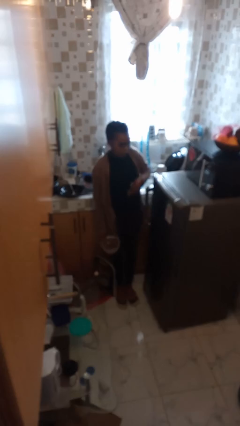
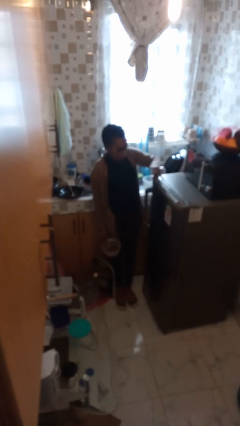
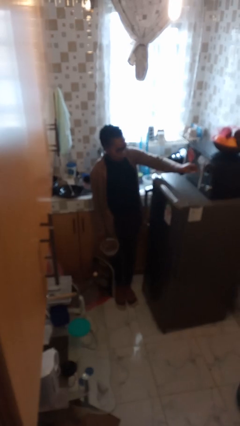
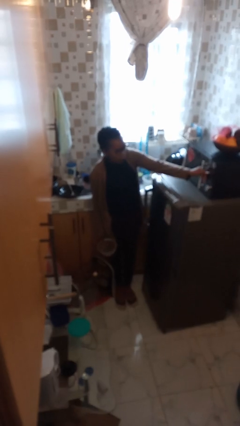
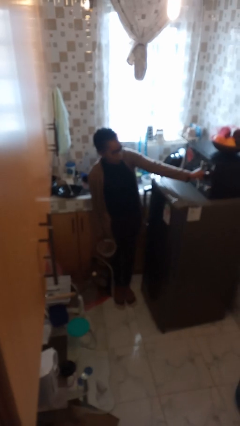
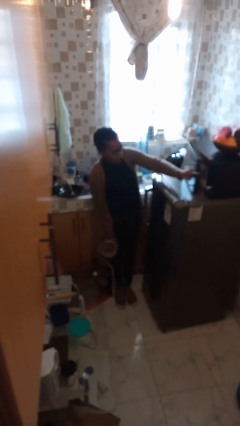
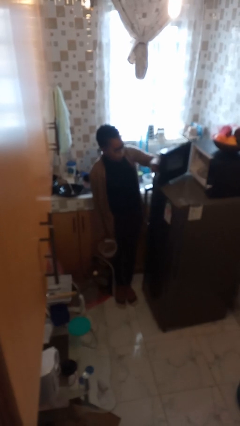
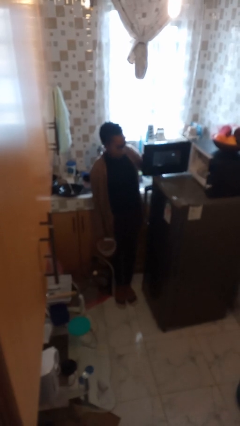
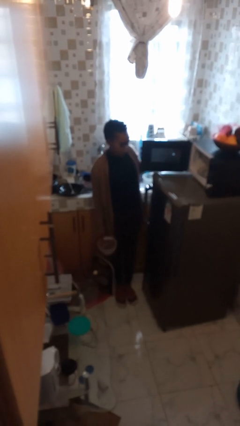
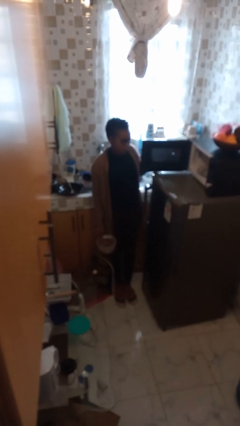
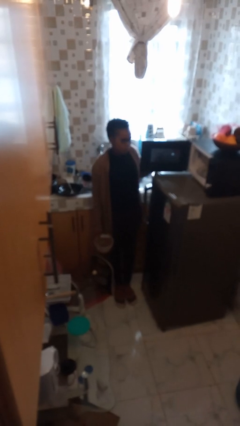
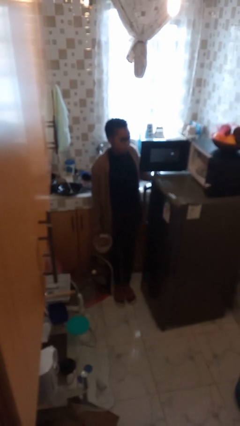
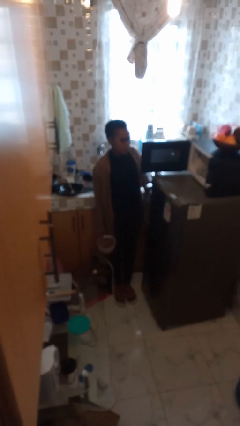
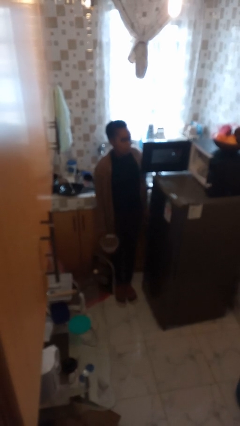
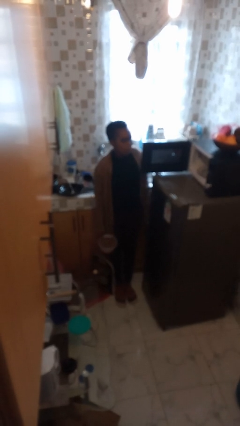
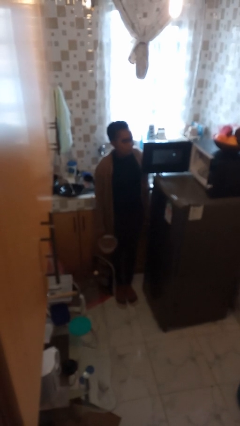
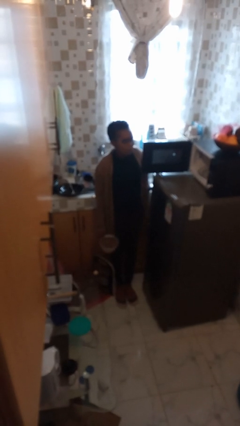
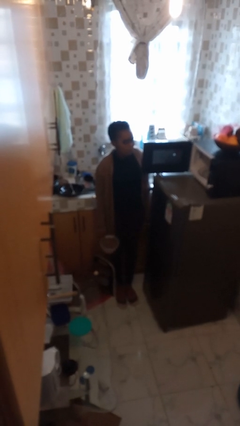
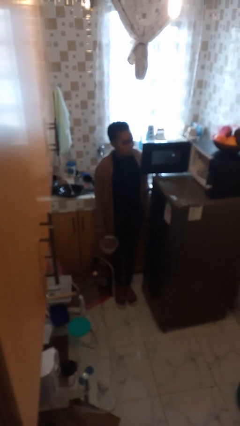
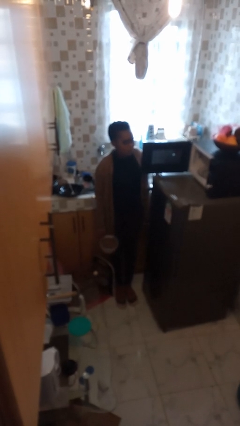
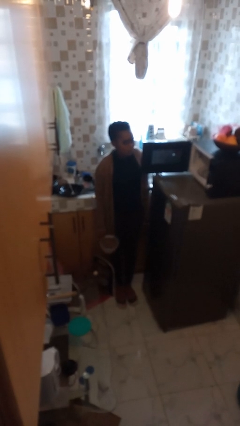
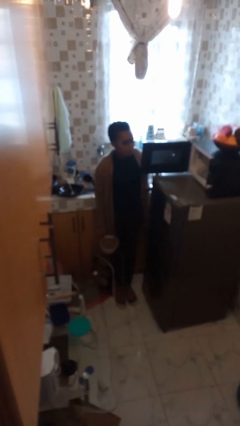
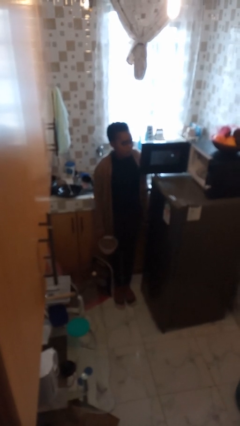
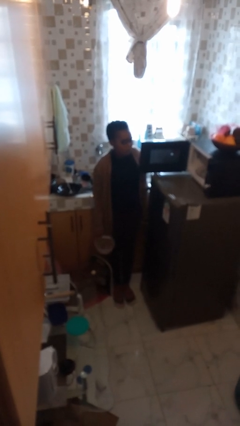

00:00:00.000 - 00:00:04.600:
person opens microwave

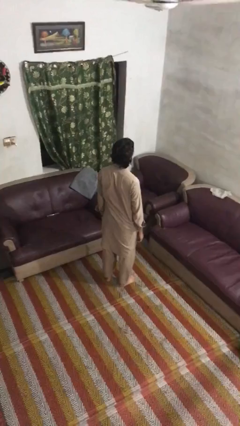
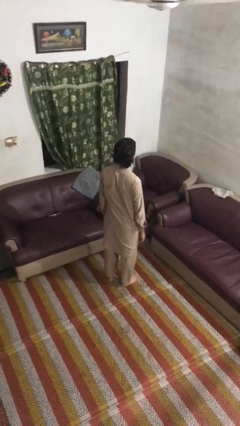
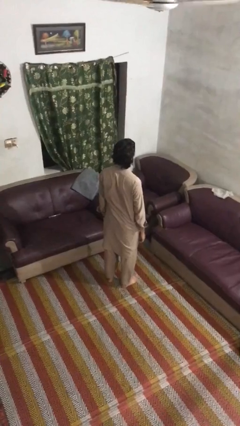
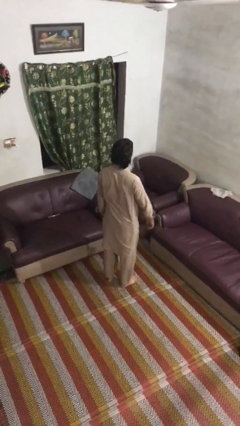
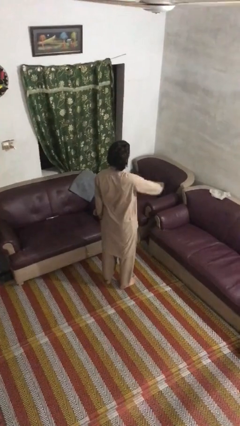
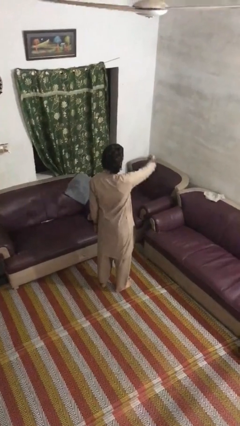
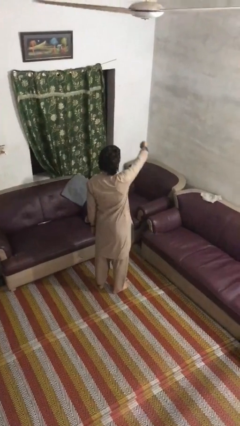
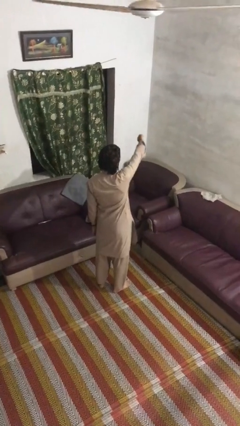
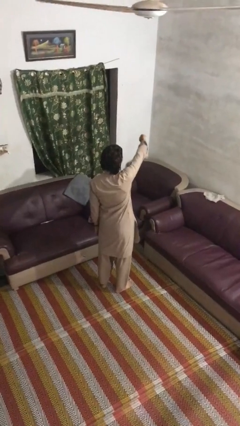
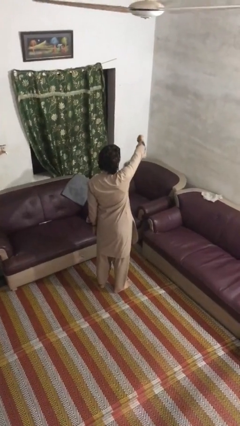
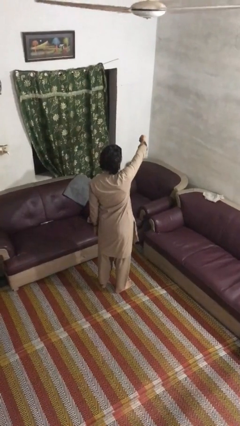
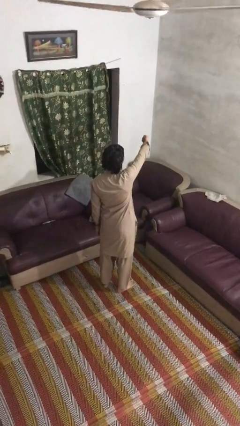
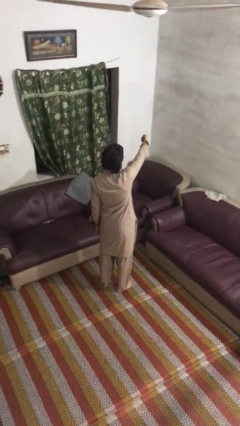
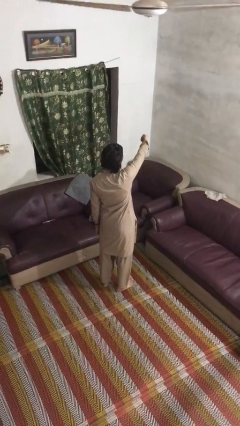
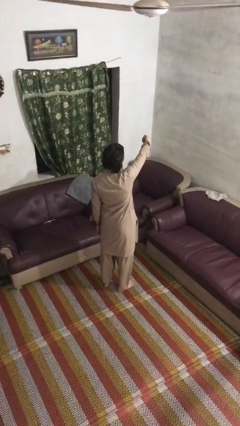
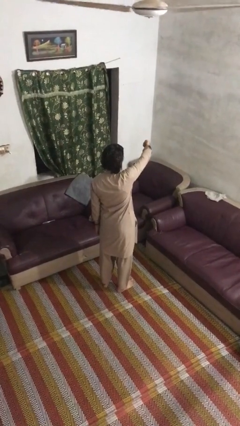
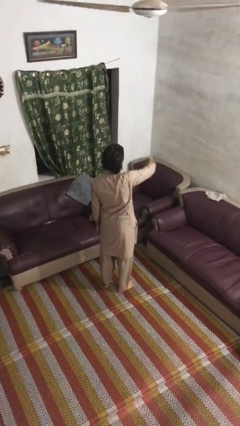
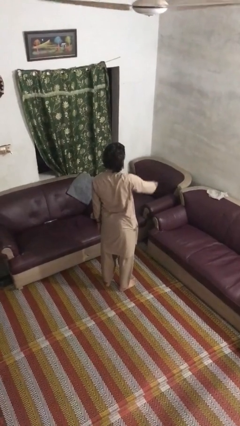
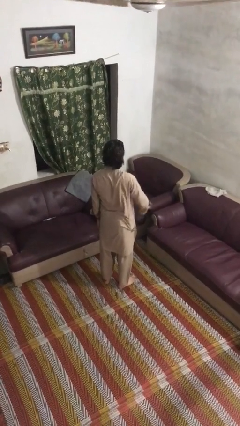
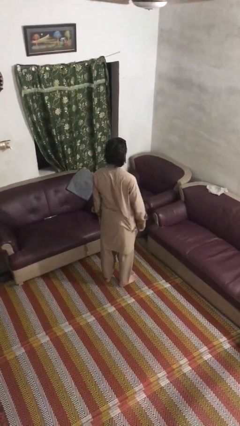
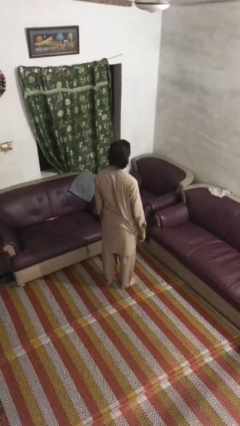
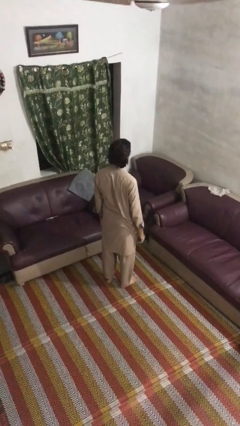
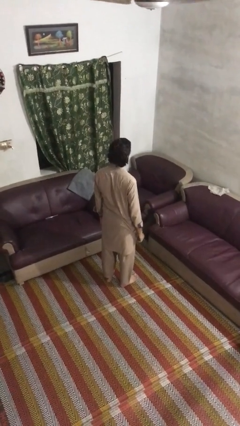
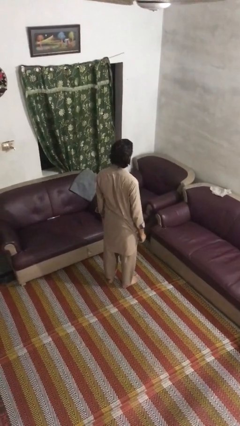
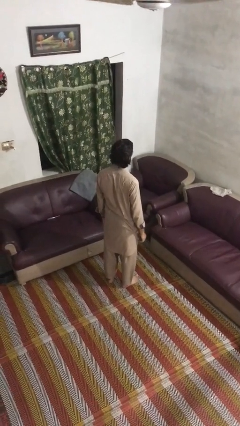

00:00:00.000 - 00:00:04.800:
person gestures thumbs down

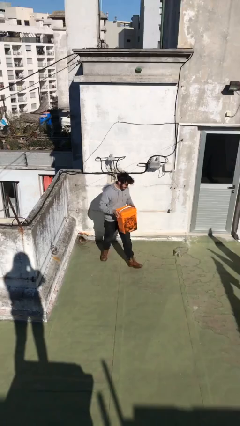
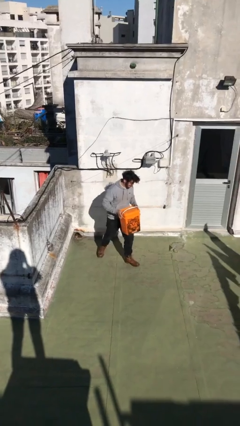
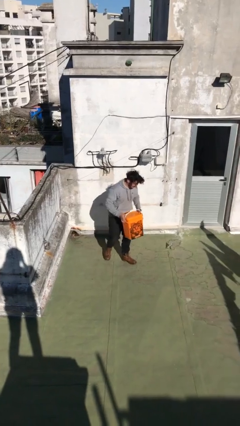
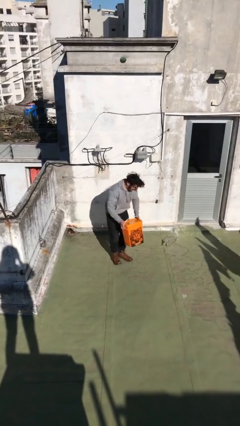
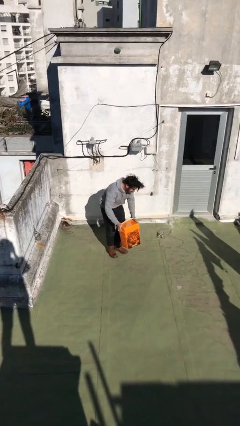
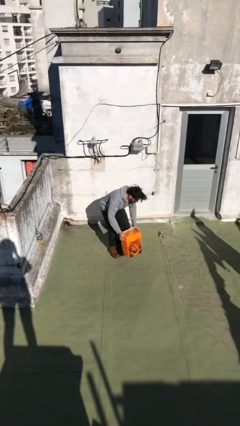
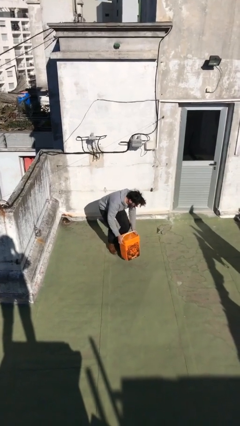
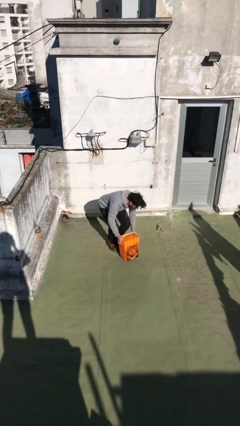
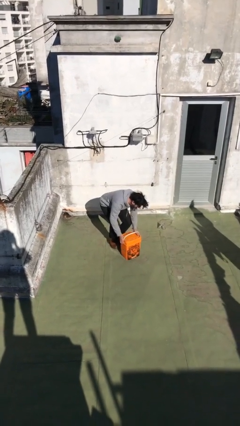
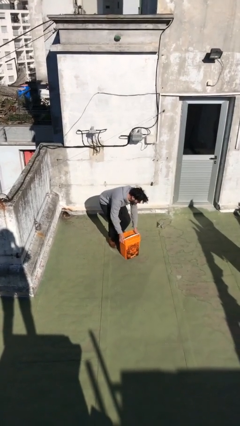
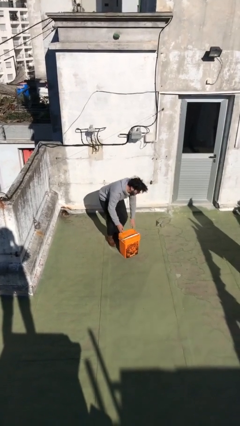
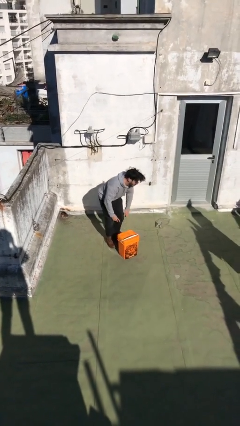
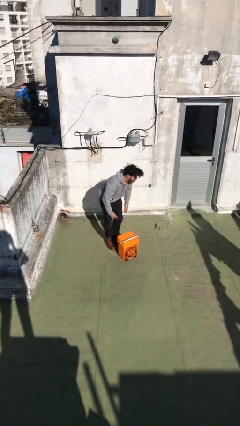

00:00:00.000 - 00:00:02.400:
person puts down object on floor

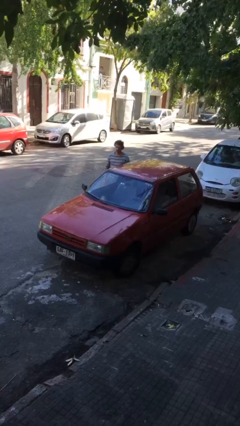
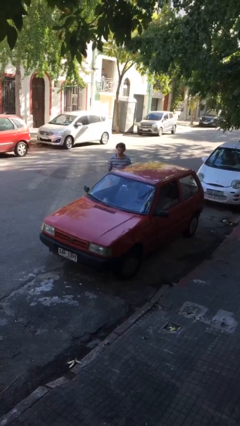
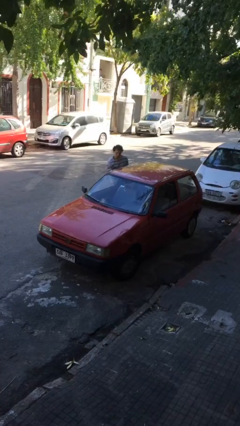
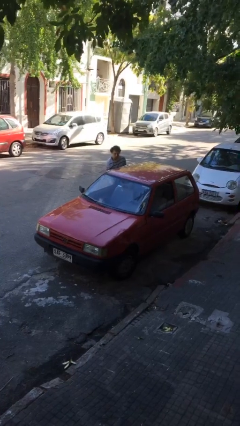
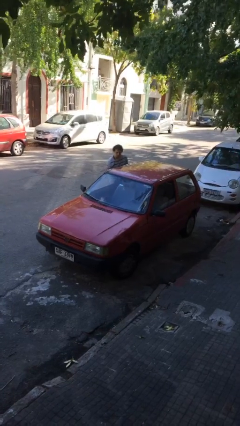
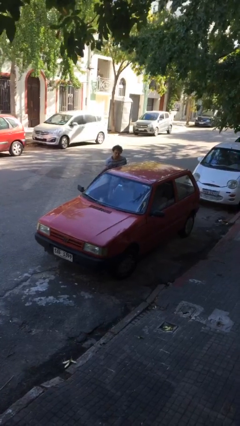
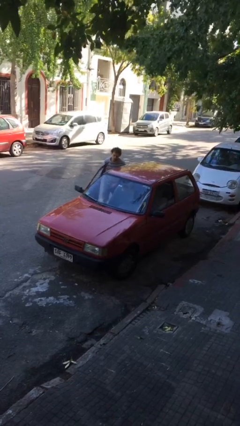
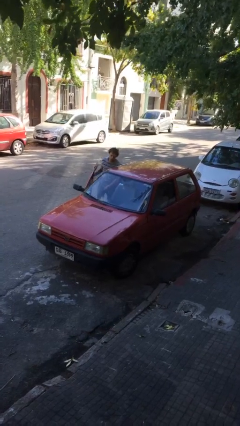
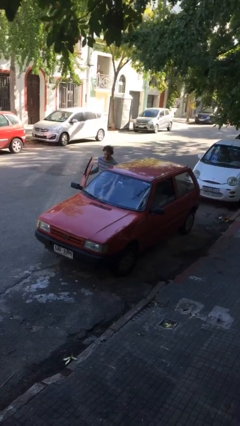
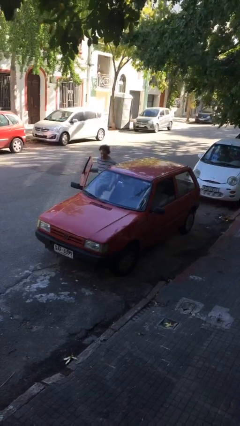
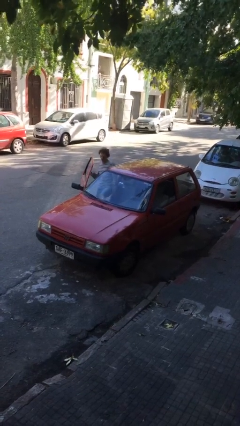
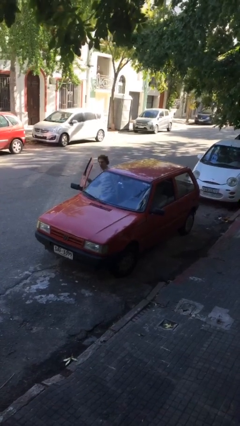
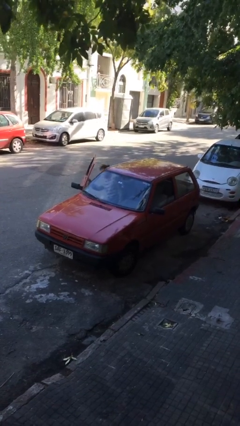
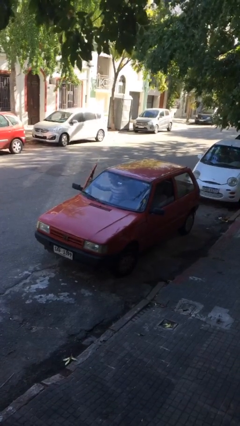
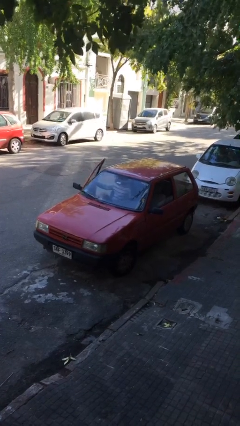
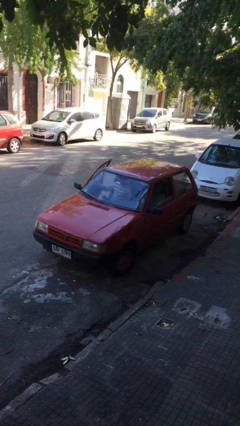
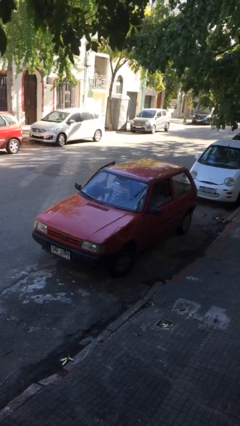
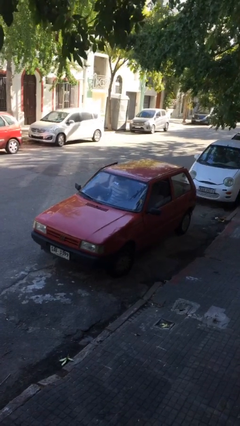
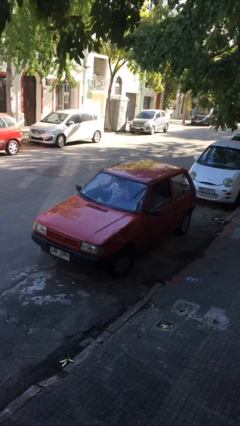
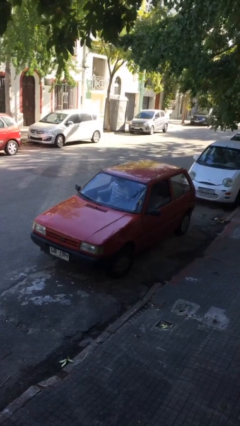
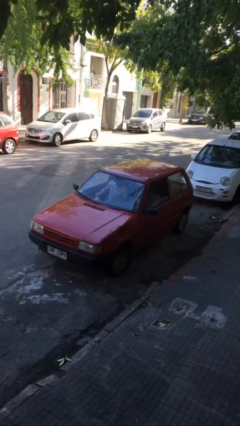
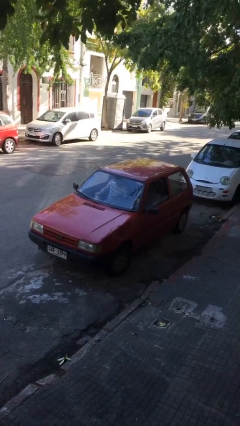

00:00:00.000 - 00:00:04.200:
car picks up person

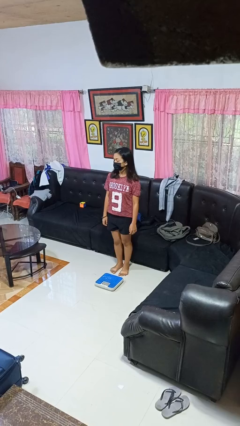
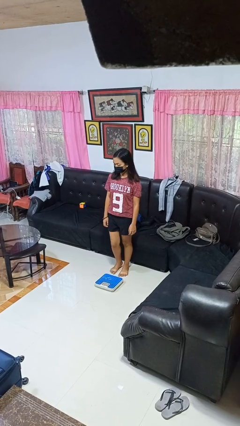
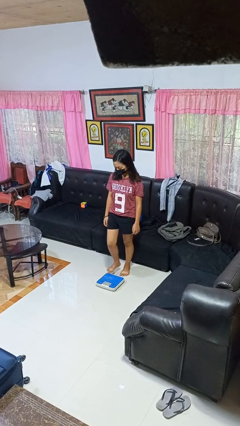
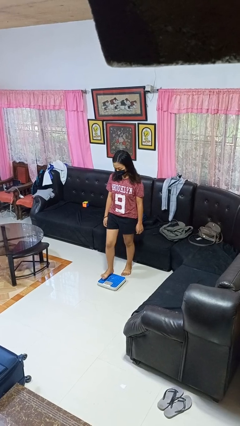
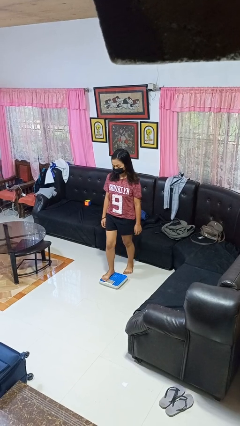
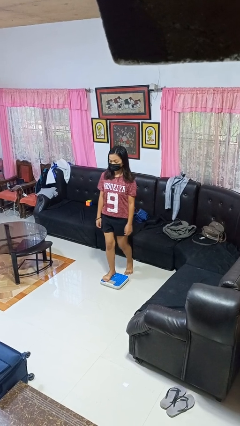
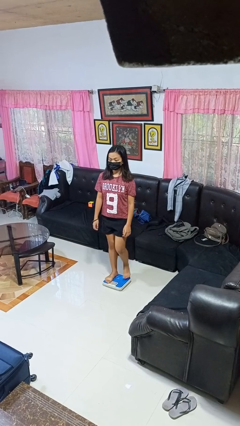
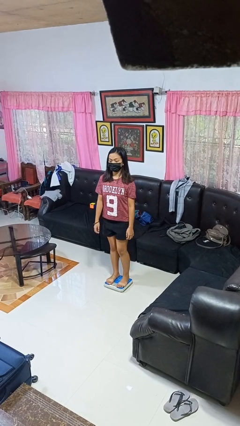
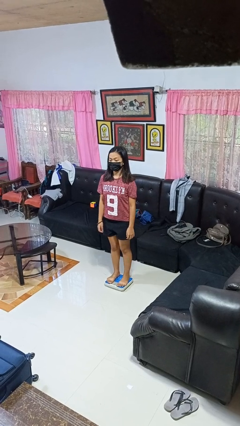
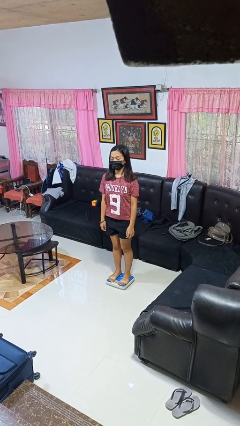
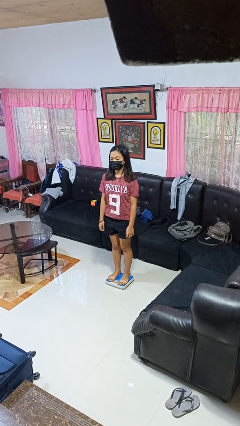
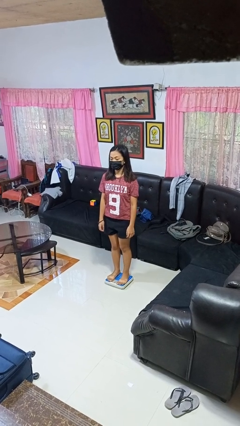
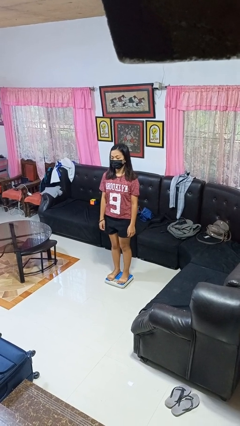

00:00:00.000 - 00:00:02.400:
person uses bodyweight scale
